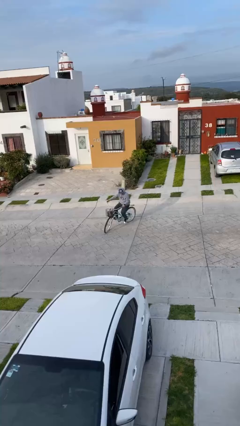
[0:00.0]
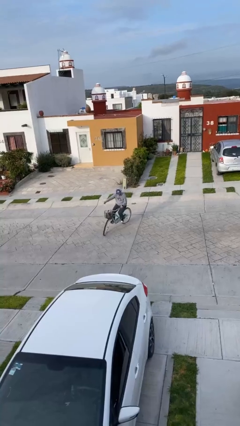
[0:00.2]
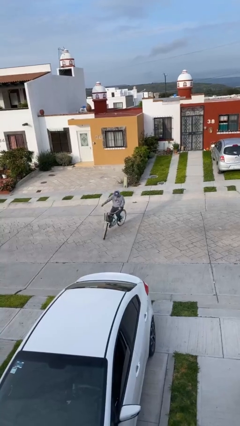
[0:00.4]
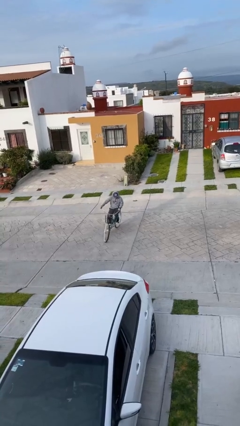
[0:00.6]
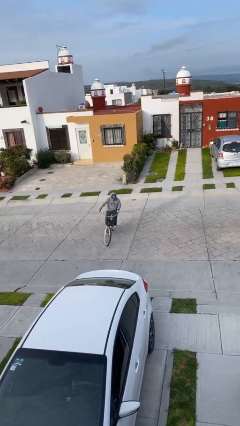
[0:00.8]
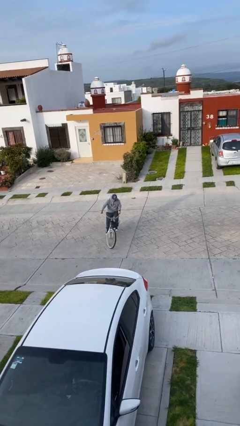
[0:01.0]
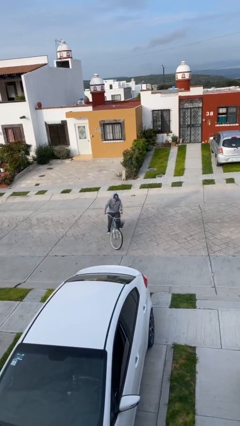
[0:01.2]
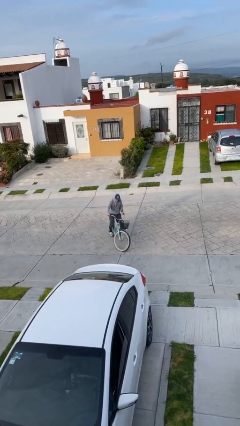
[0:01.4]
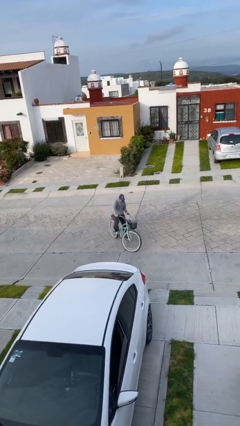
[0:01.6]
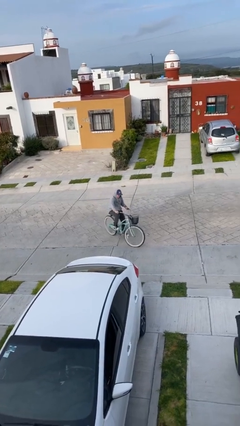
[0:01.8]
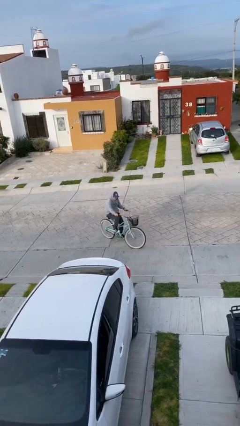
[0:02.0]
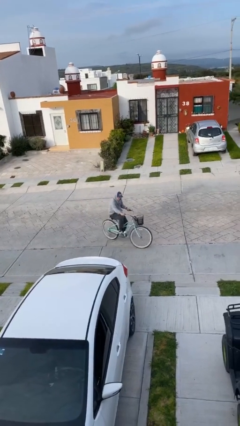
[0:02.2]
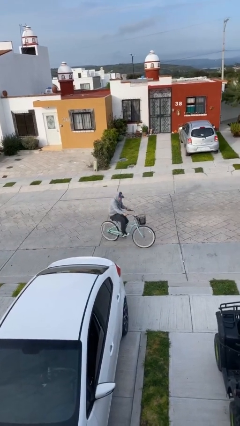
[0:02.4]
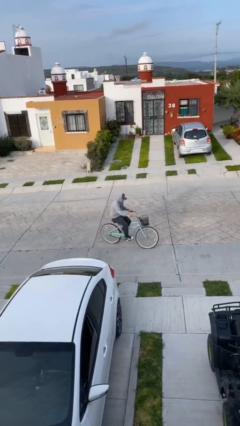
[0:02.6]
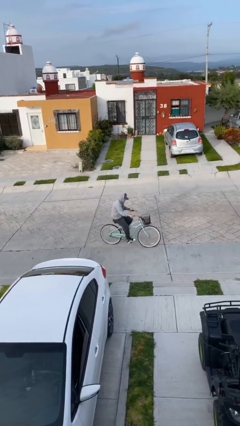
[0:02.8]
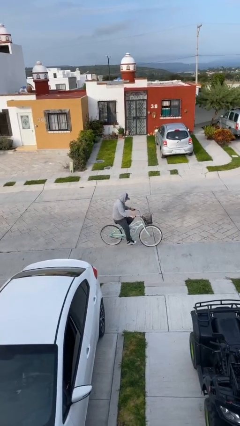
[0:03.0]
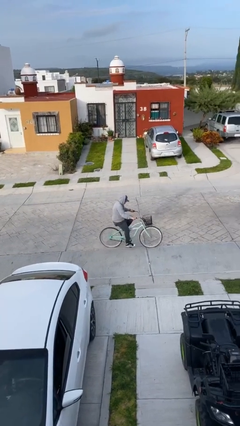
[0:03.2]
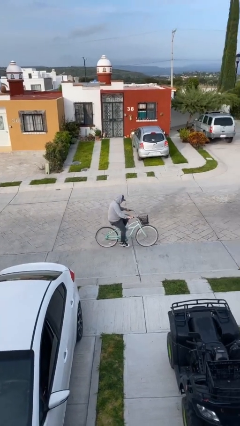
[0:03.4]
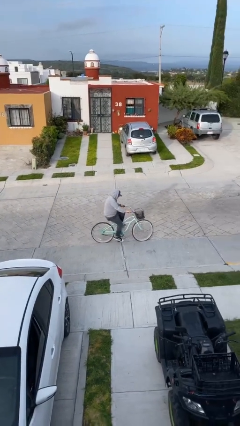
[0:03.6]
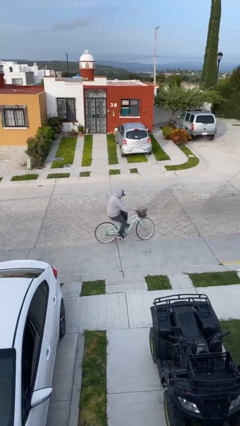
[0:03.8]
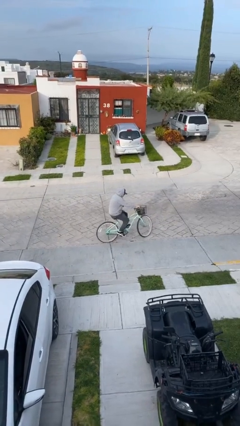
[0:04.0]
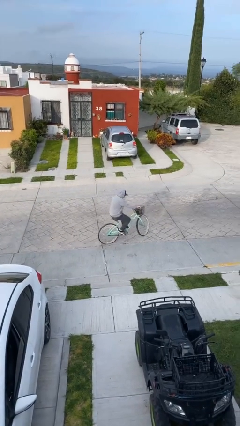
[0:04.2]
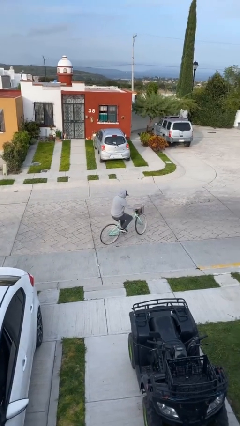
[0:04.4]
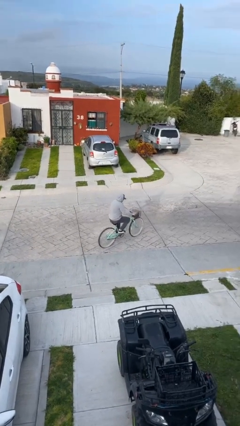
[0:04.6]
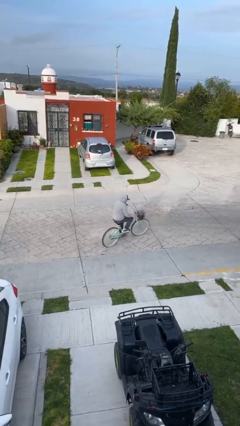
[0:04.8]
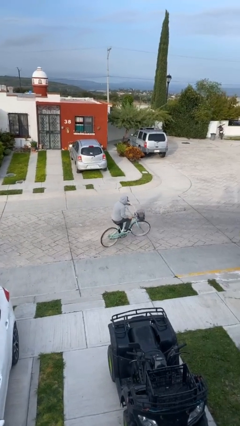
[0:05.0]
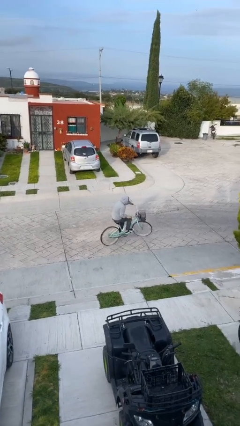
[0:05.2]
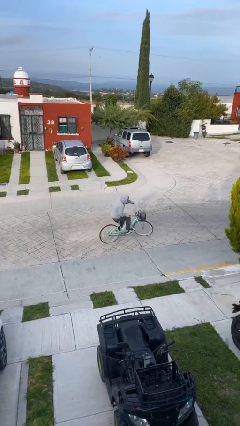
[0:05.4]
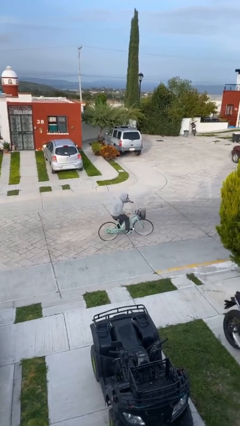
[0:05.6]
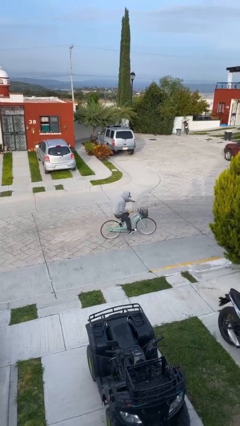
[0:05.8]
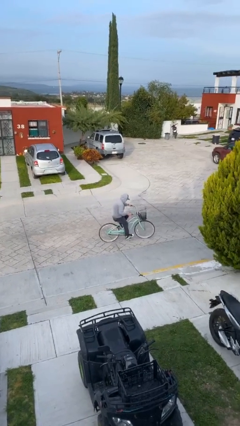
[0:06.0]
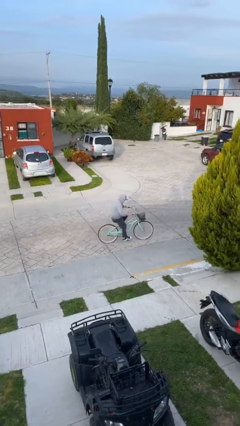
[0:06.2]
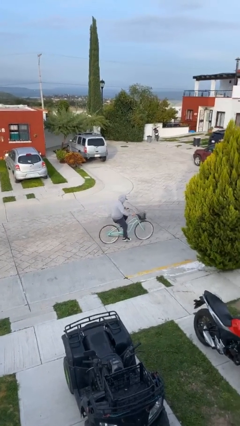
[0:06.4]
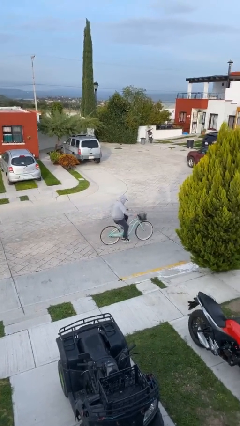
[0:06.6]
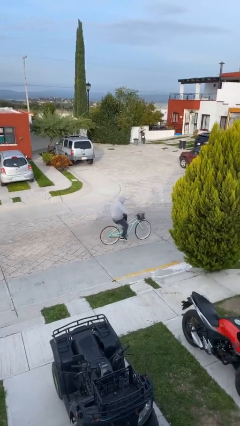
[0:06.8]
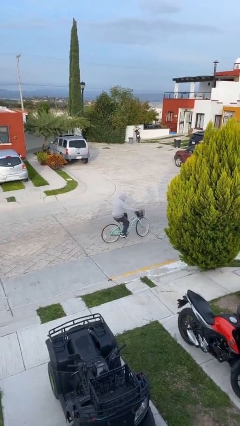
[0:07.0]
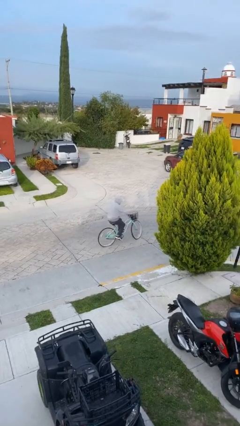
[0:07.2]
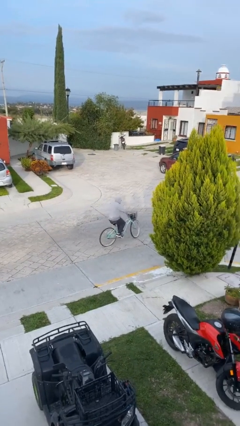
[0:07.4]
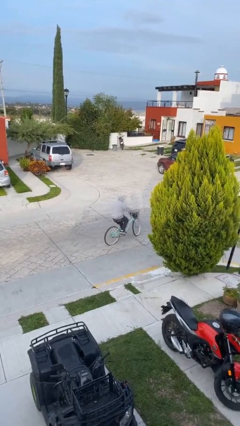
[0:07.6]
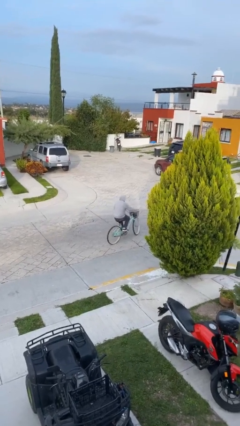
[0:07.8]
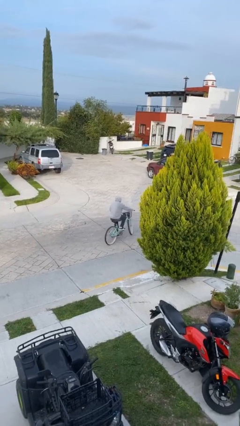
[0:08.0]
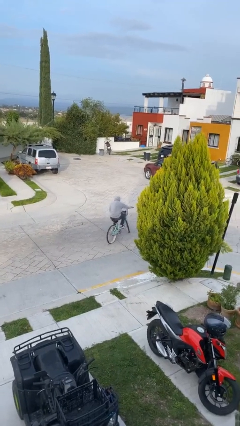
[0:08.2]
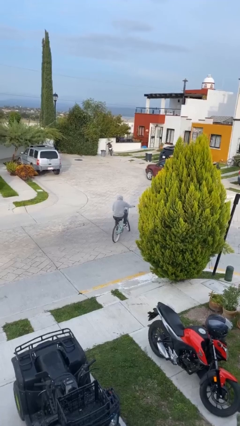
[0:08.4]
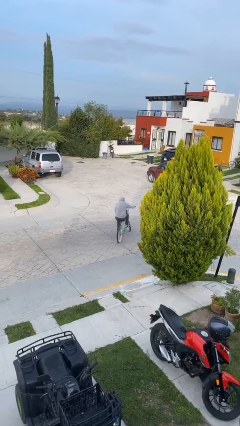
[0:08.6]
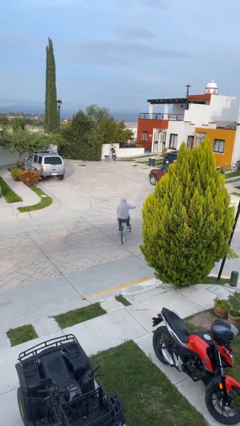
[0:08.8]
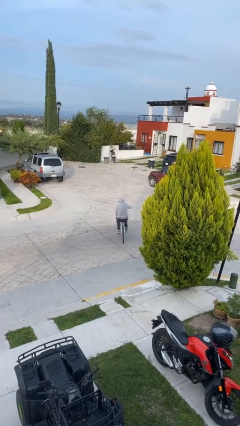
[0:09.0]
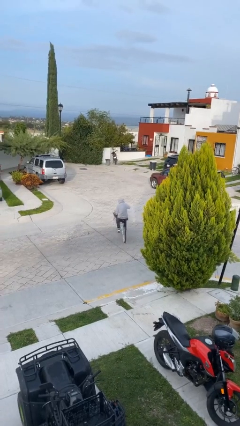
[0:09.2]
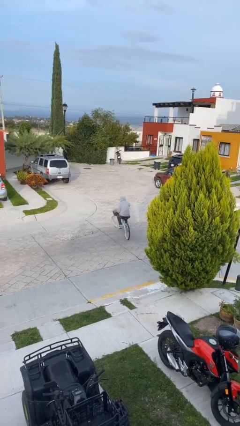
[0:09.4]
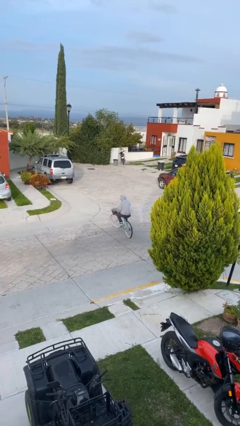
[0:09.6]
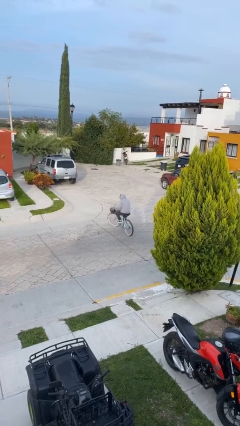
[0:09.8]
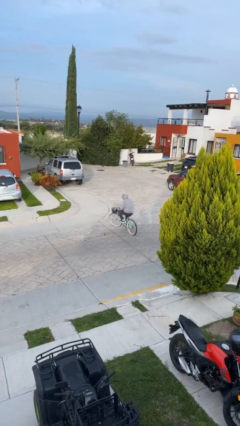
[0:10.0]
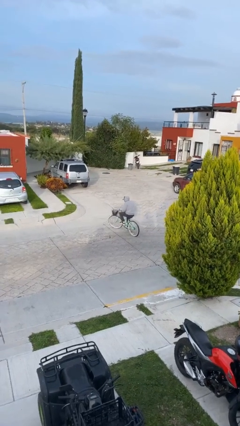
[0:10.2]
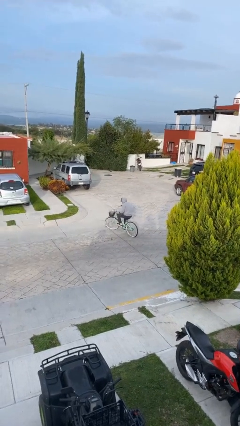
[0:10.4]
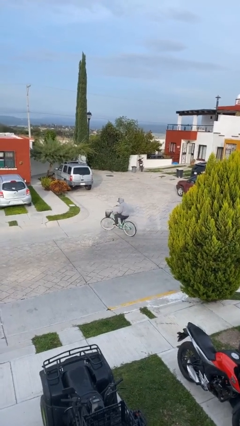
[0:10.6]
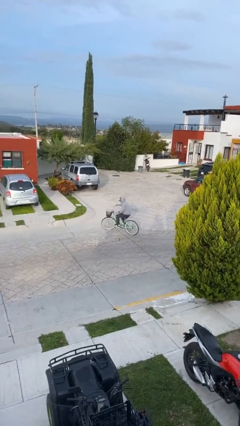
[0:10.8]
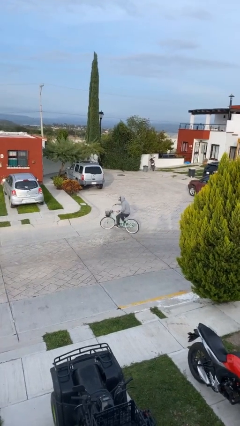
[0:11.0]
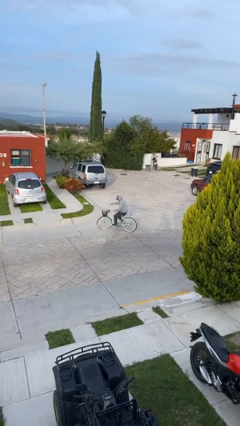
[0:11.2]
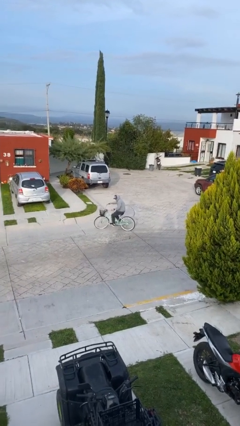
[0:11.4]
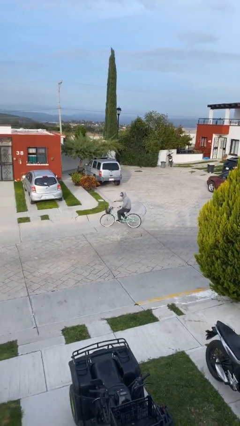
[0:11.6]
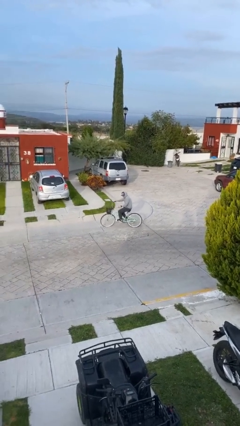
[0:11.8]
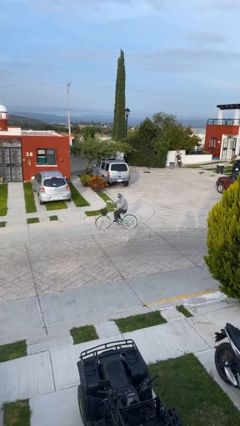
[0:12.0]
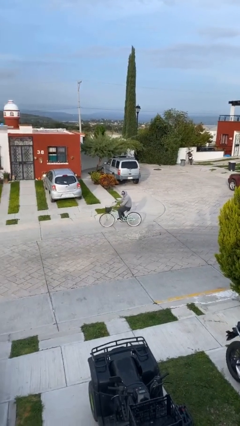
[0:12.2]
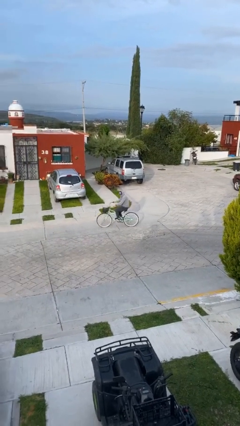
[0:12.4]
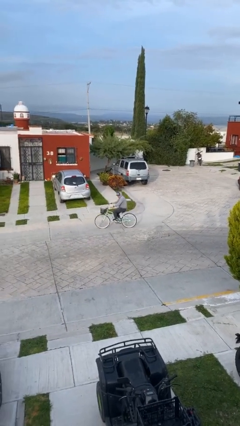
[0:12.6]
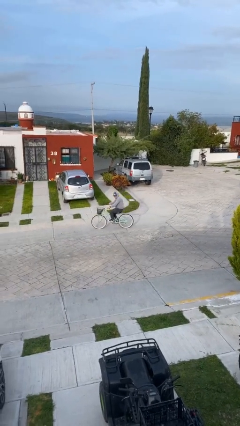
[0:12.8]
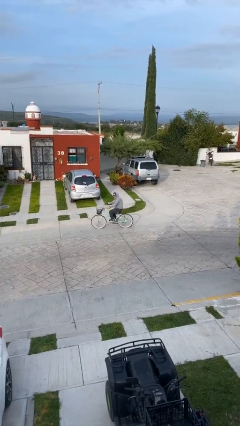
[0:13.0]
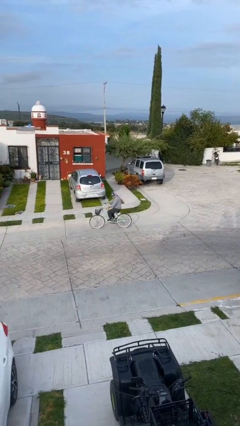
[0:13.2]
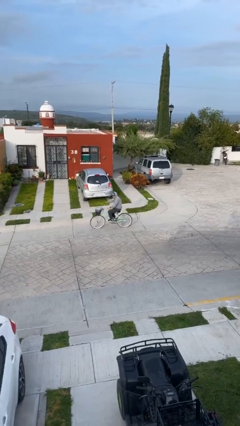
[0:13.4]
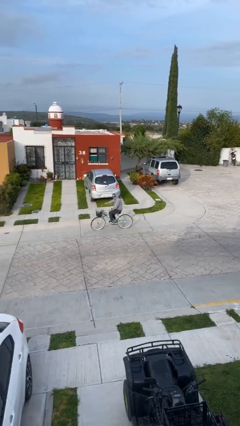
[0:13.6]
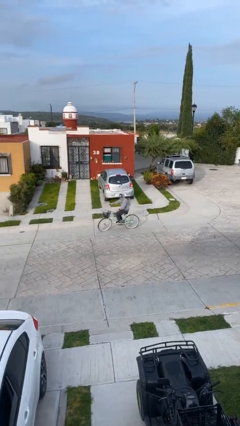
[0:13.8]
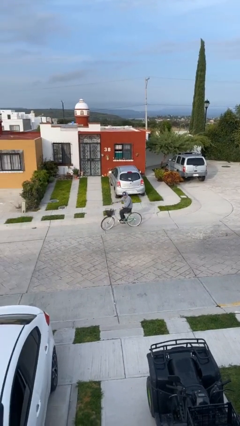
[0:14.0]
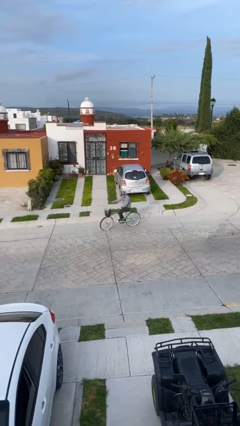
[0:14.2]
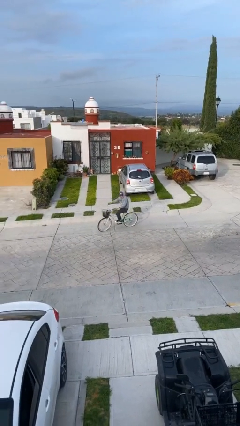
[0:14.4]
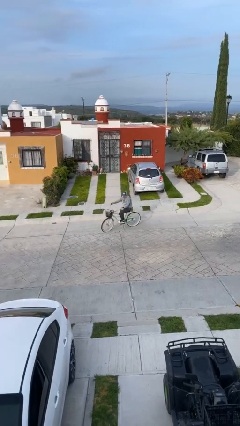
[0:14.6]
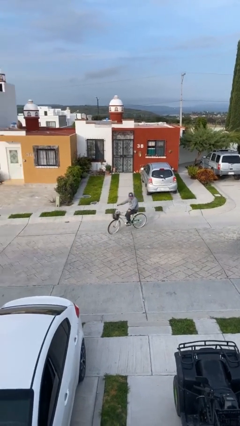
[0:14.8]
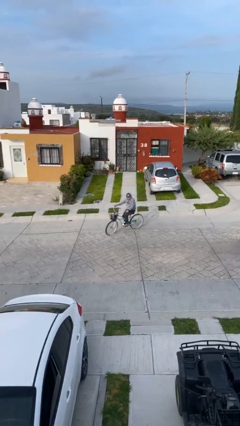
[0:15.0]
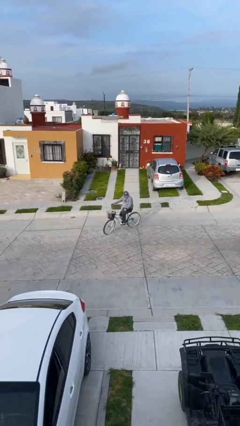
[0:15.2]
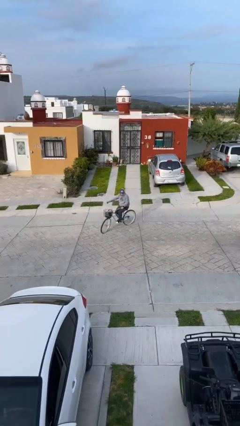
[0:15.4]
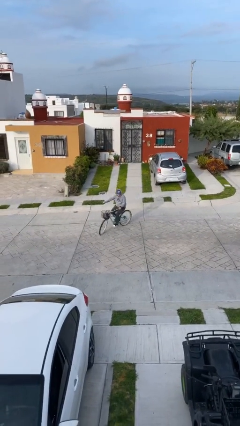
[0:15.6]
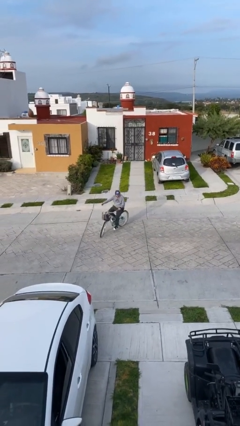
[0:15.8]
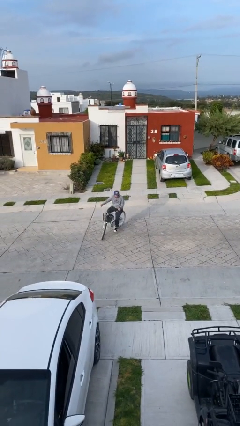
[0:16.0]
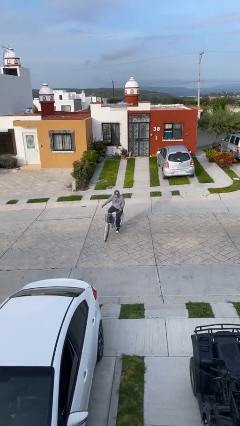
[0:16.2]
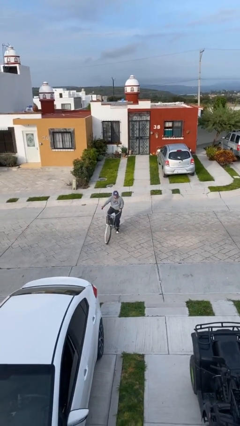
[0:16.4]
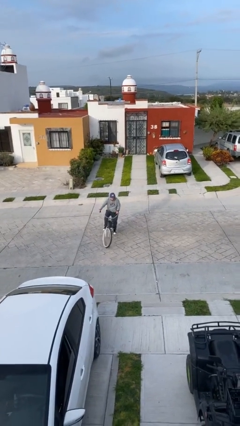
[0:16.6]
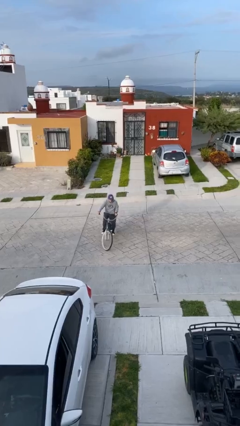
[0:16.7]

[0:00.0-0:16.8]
person rides bicycle

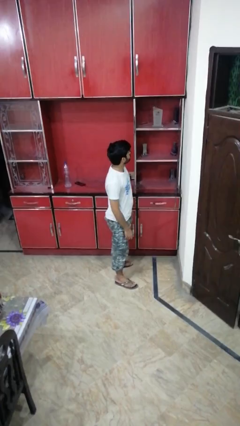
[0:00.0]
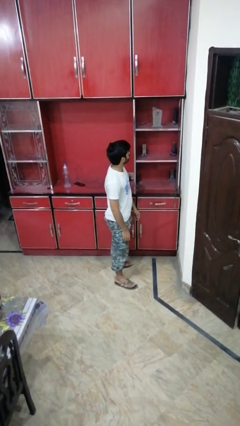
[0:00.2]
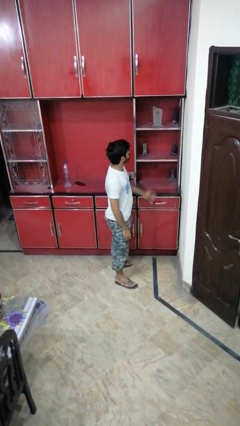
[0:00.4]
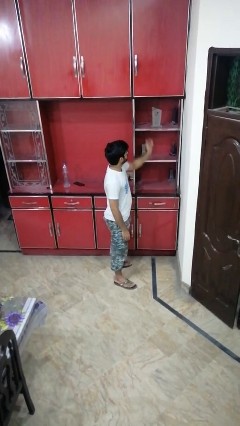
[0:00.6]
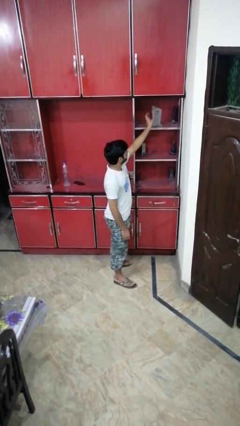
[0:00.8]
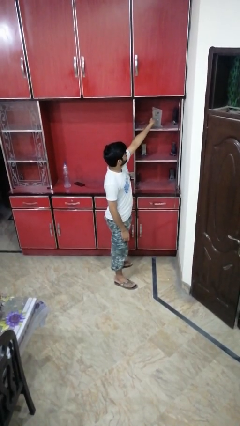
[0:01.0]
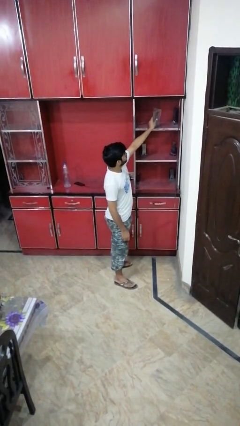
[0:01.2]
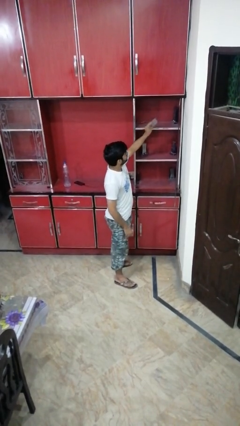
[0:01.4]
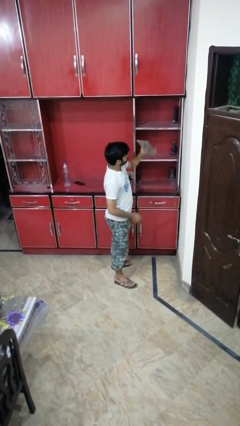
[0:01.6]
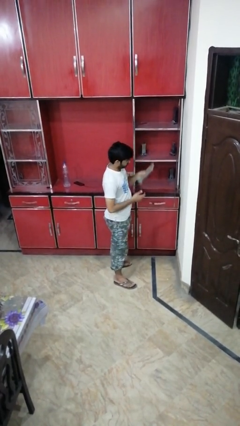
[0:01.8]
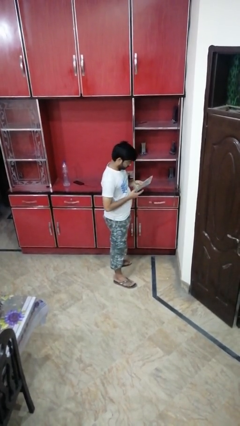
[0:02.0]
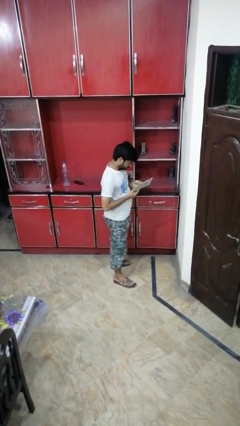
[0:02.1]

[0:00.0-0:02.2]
person picks up object from cabinet
